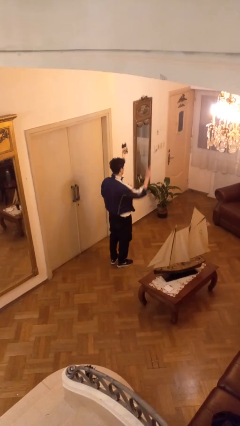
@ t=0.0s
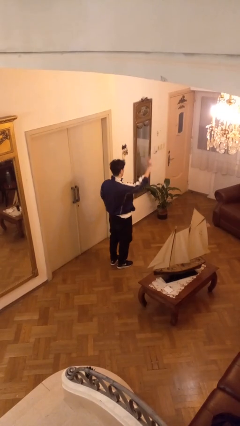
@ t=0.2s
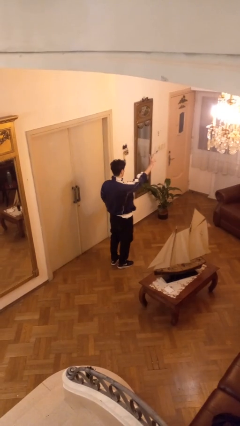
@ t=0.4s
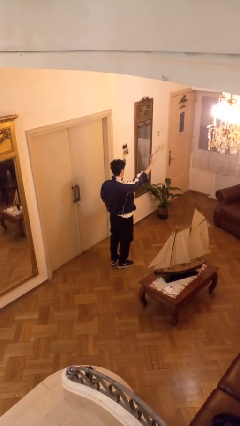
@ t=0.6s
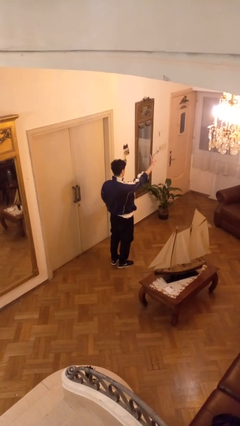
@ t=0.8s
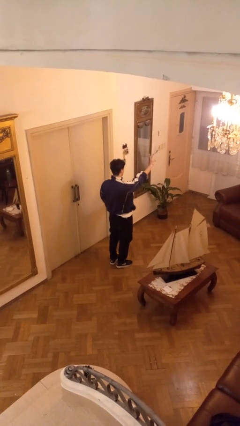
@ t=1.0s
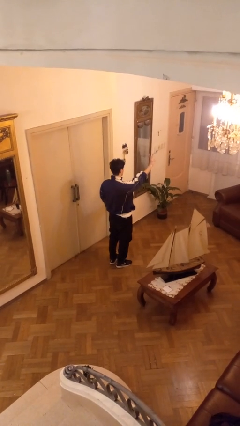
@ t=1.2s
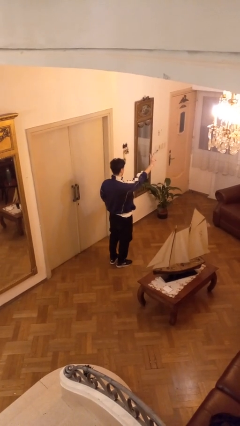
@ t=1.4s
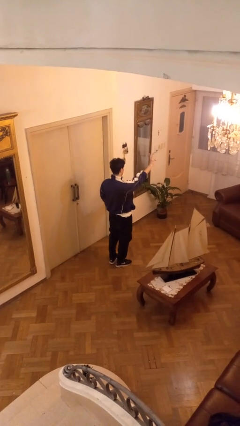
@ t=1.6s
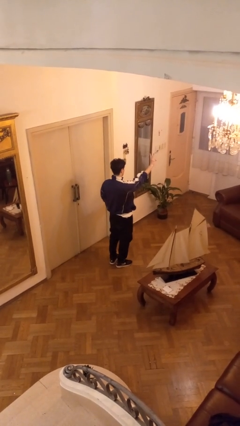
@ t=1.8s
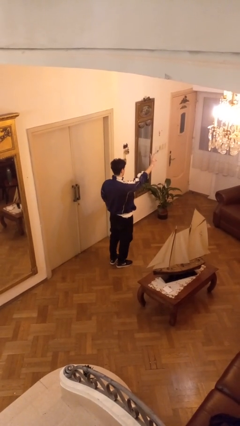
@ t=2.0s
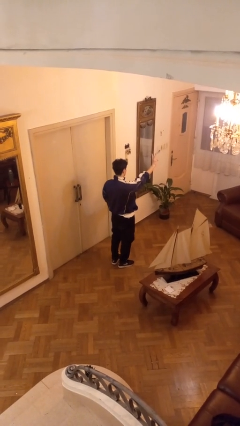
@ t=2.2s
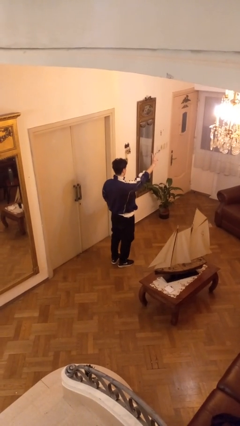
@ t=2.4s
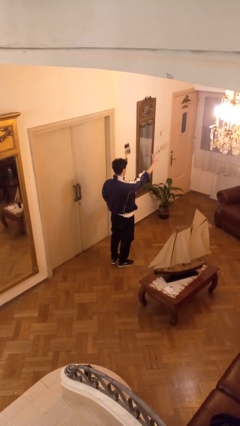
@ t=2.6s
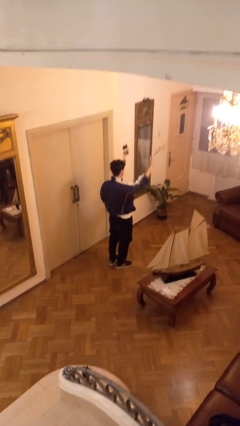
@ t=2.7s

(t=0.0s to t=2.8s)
person gestures peace

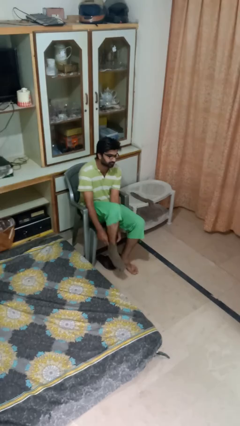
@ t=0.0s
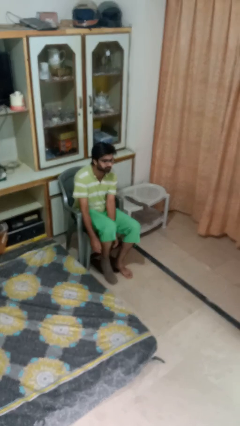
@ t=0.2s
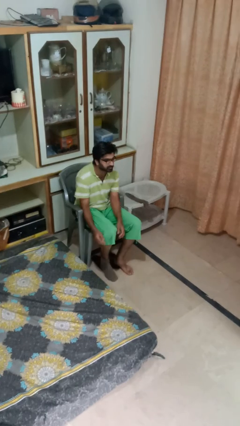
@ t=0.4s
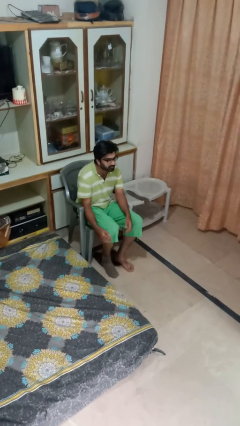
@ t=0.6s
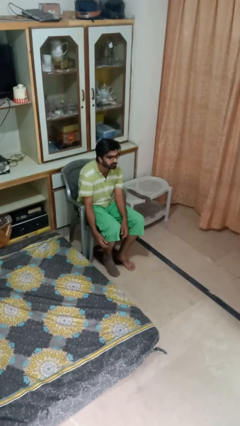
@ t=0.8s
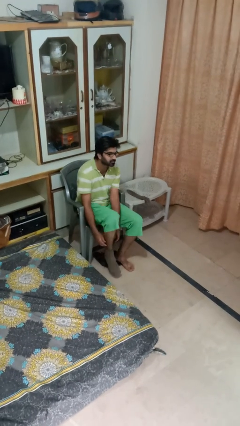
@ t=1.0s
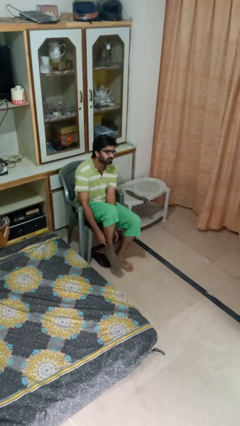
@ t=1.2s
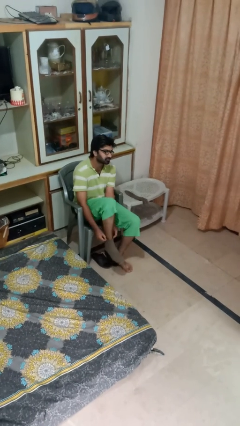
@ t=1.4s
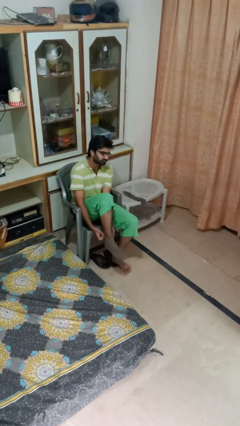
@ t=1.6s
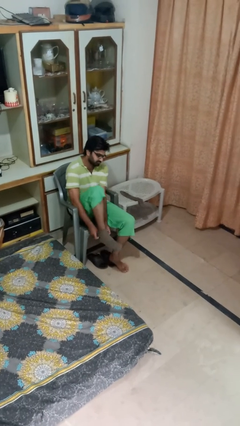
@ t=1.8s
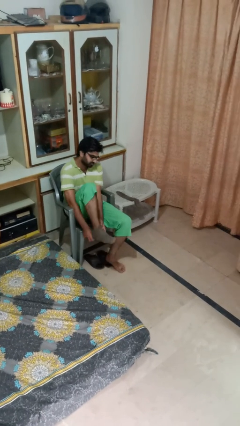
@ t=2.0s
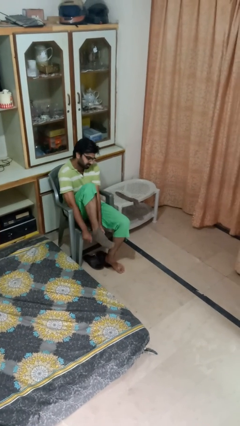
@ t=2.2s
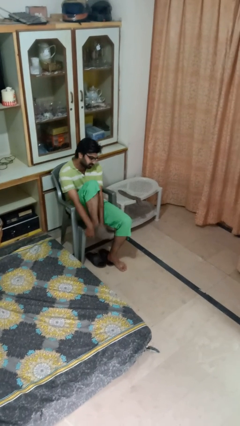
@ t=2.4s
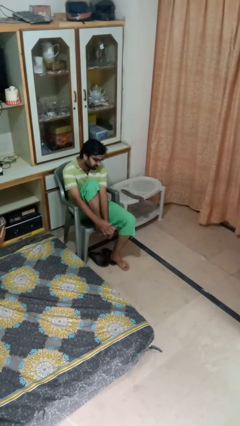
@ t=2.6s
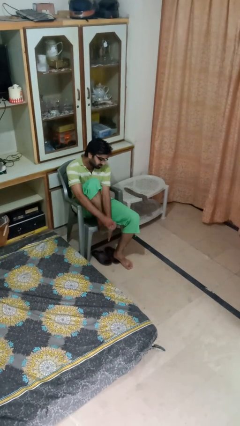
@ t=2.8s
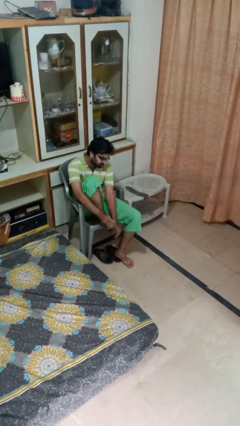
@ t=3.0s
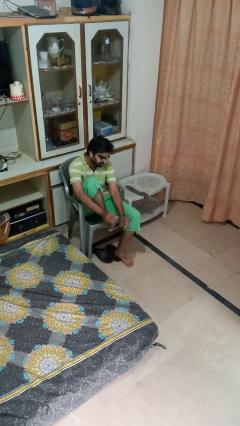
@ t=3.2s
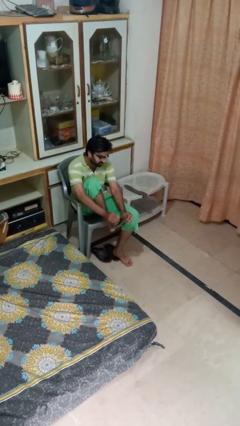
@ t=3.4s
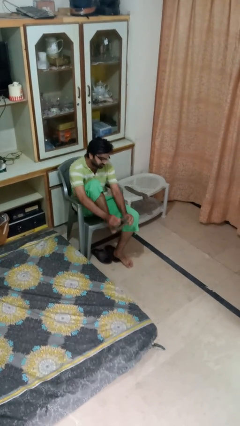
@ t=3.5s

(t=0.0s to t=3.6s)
person takes off socks

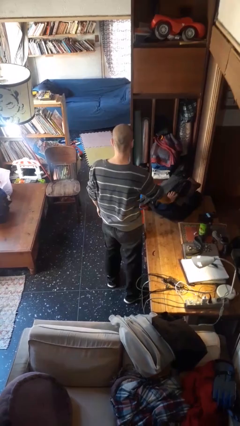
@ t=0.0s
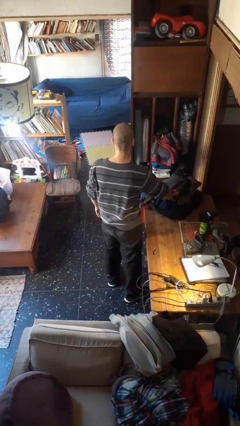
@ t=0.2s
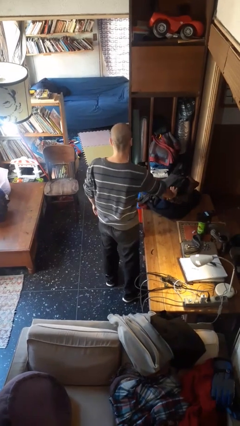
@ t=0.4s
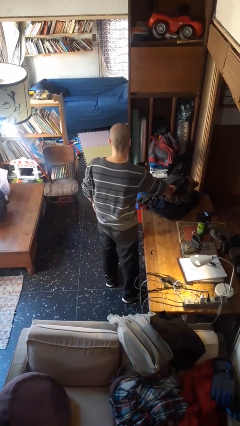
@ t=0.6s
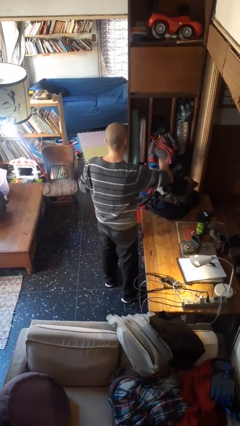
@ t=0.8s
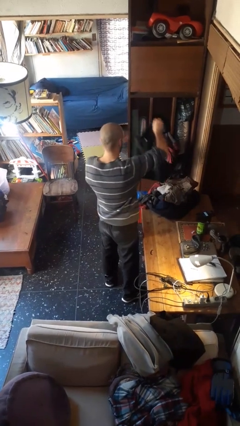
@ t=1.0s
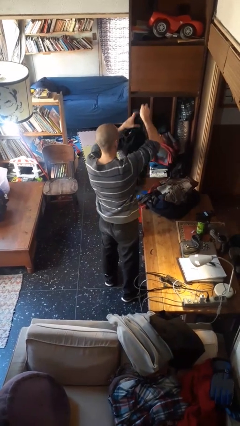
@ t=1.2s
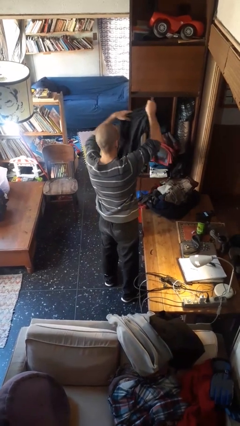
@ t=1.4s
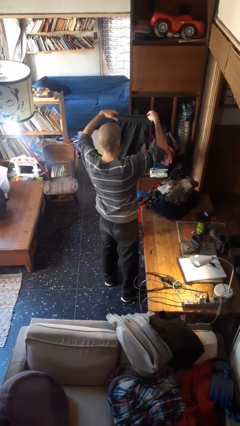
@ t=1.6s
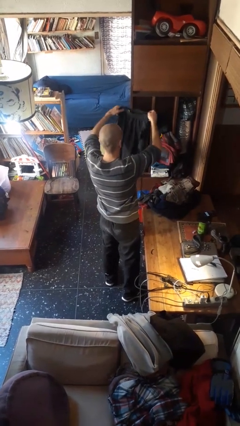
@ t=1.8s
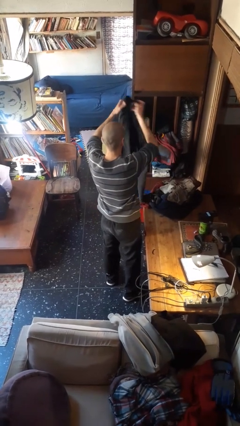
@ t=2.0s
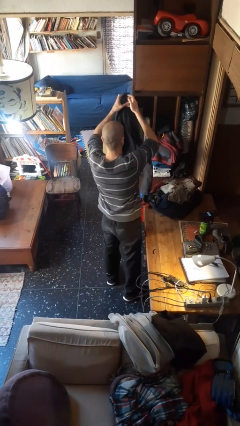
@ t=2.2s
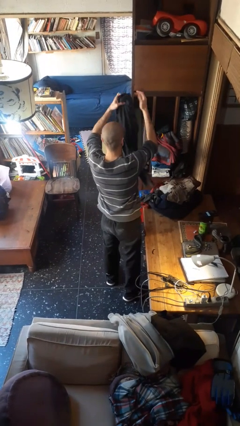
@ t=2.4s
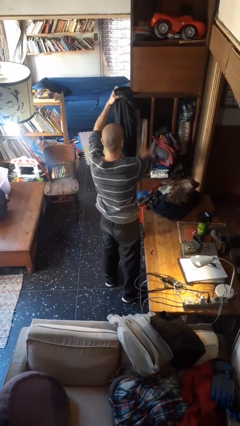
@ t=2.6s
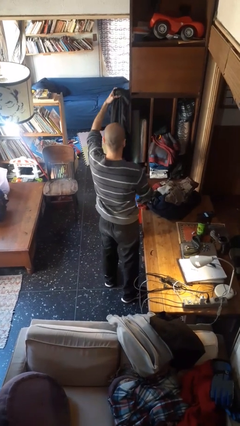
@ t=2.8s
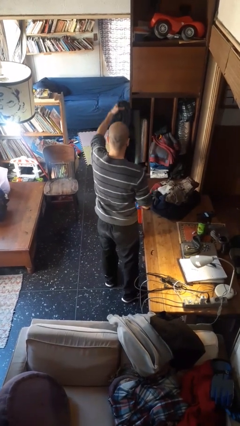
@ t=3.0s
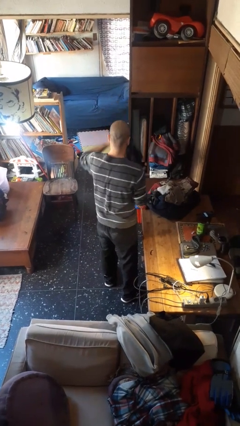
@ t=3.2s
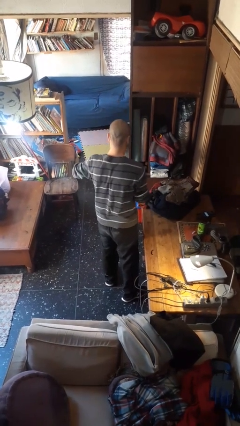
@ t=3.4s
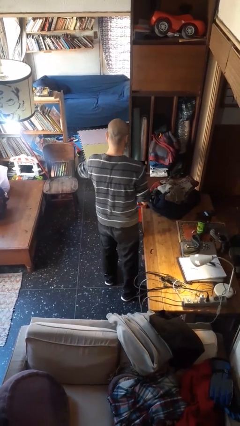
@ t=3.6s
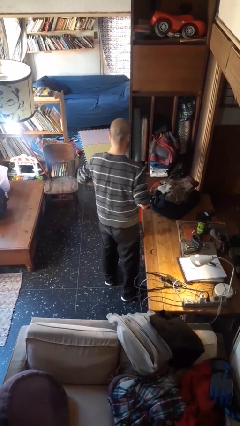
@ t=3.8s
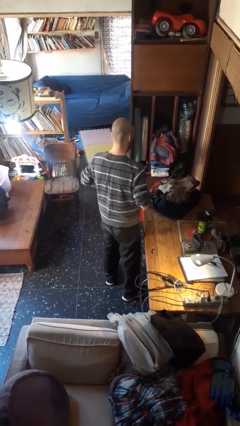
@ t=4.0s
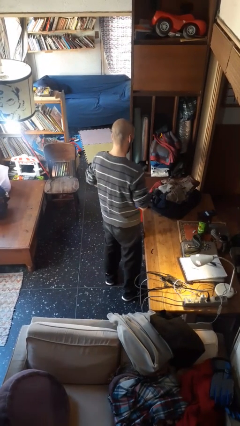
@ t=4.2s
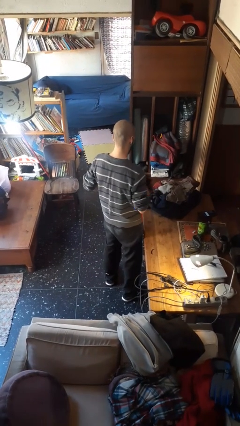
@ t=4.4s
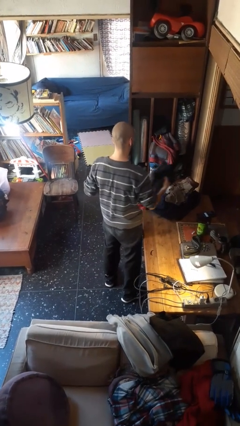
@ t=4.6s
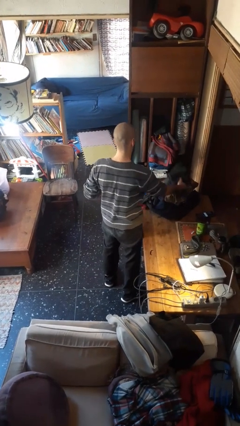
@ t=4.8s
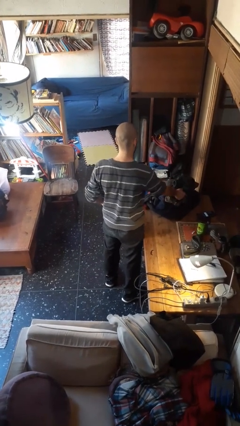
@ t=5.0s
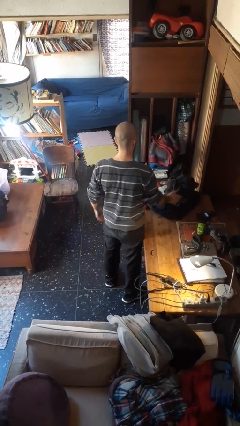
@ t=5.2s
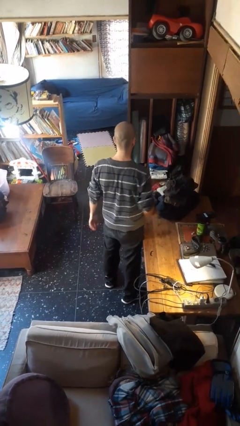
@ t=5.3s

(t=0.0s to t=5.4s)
person folds pants

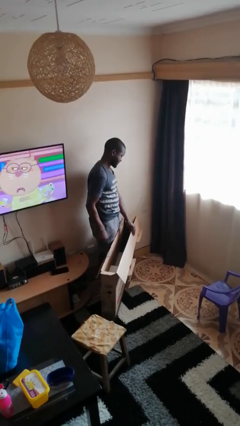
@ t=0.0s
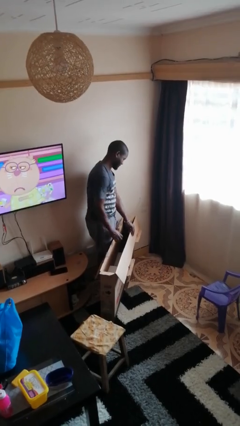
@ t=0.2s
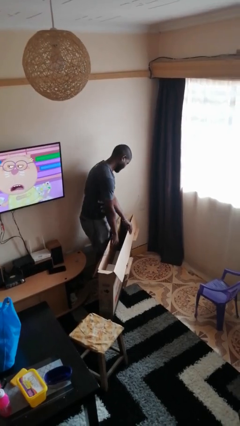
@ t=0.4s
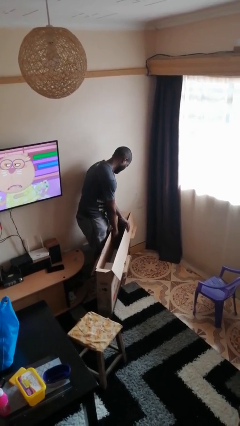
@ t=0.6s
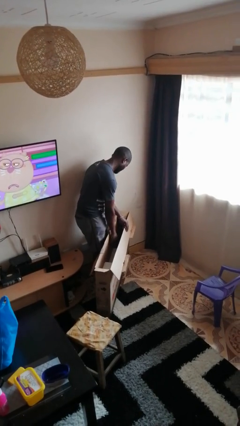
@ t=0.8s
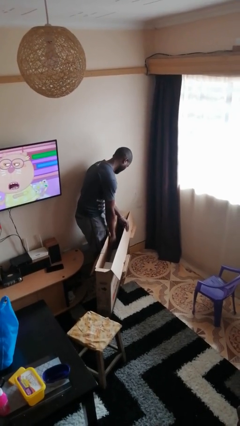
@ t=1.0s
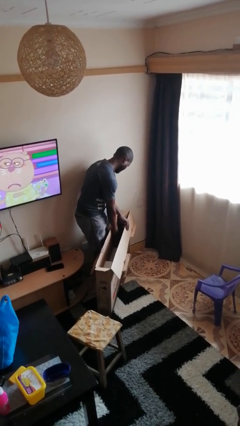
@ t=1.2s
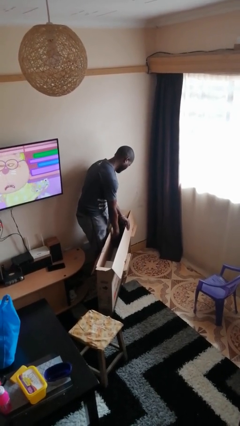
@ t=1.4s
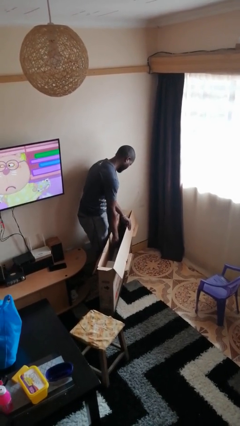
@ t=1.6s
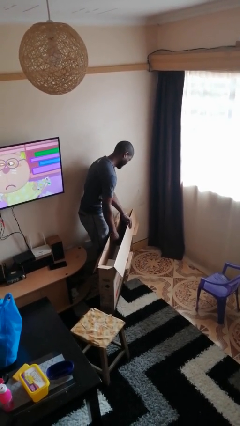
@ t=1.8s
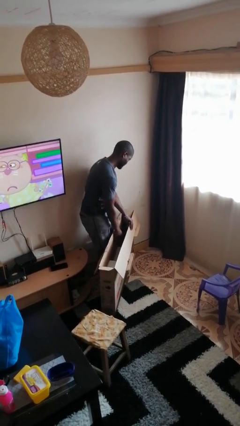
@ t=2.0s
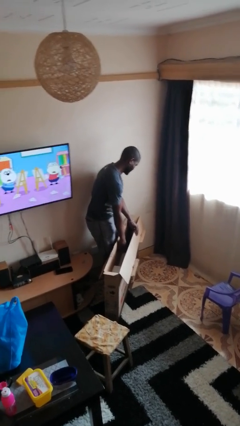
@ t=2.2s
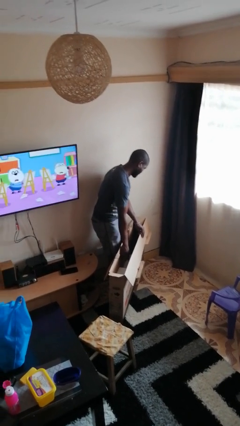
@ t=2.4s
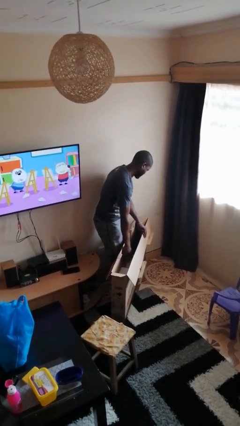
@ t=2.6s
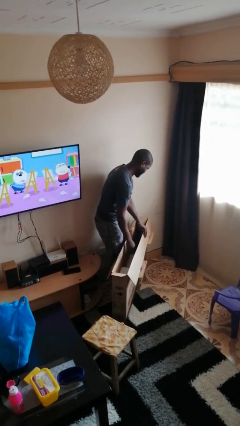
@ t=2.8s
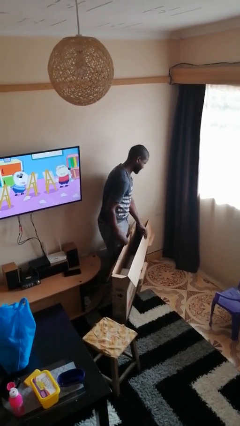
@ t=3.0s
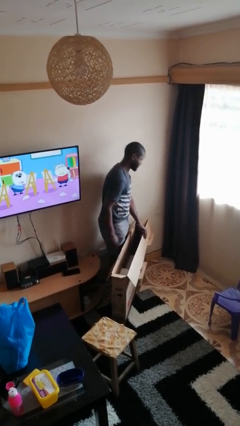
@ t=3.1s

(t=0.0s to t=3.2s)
person searches in box

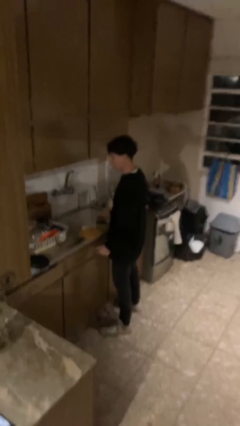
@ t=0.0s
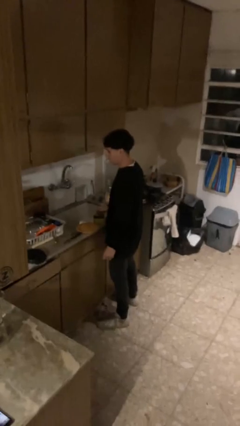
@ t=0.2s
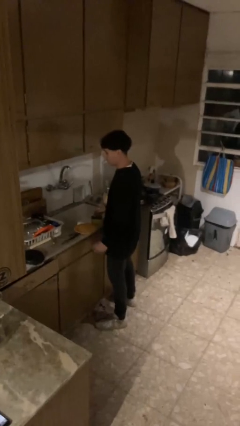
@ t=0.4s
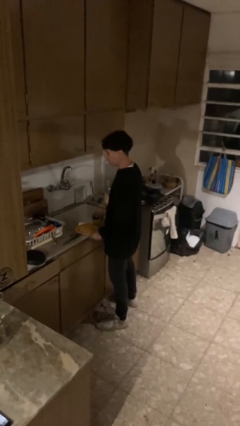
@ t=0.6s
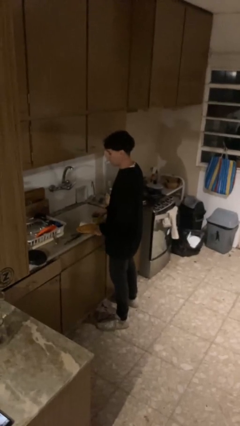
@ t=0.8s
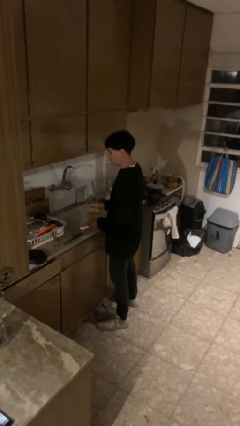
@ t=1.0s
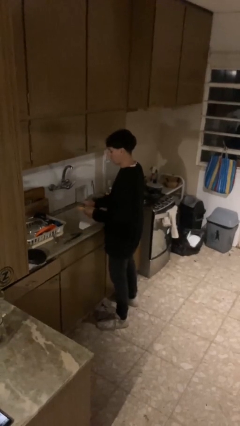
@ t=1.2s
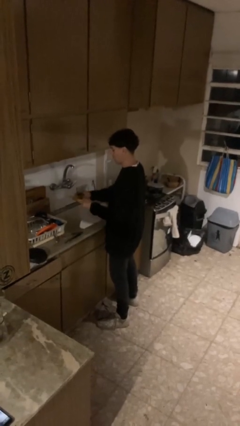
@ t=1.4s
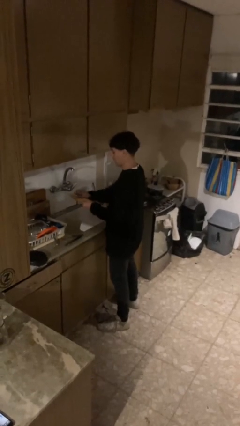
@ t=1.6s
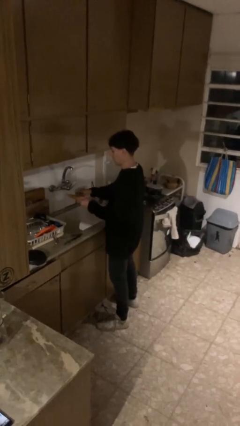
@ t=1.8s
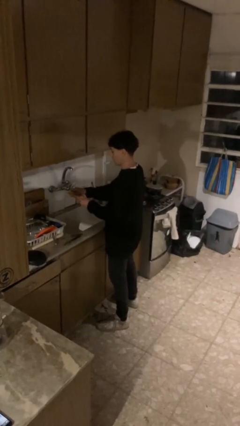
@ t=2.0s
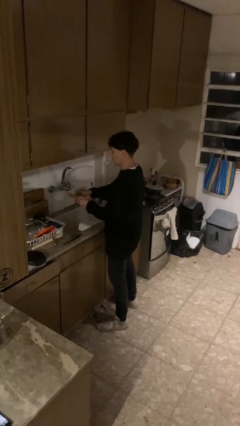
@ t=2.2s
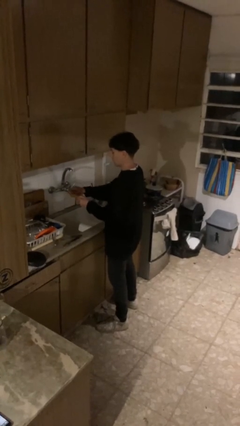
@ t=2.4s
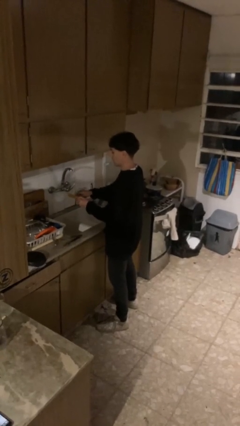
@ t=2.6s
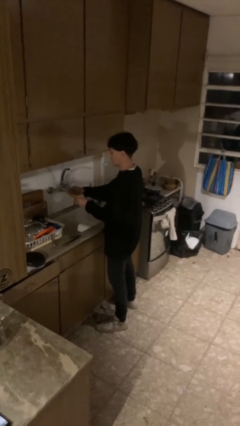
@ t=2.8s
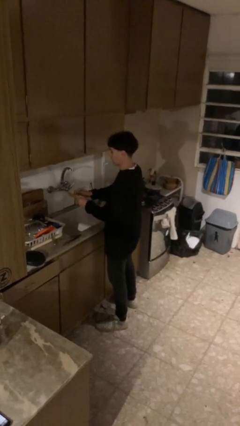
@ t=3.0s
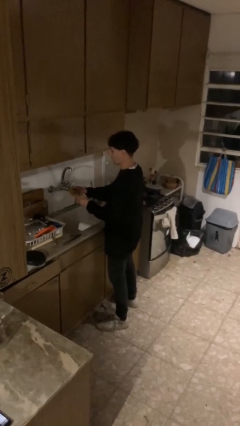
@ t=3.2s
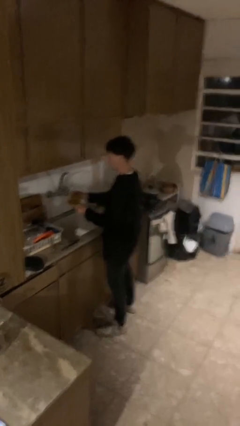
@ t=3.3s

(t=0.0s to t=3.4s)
person washes dish
